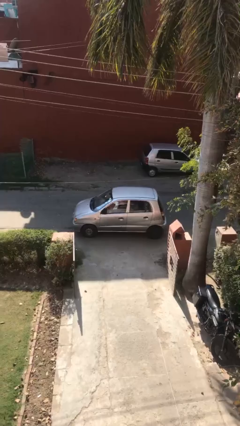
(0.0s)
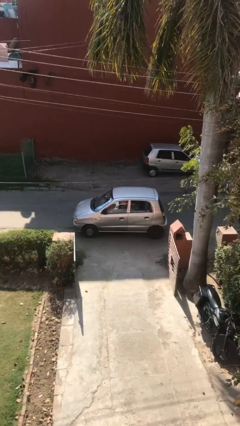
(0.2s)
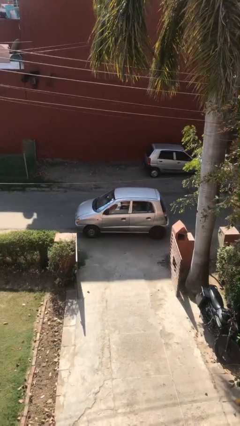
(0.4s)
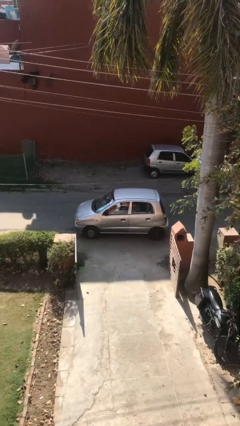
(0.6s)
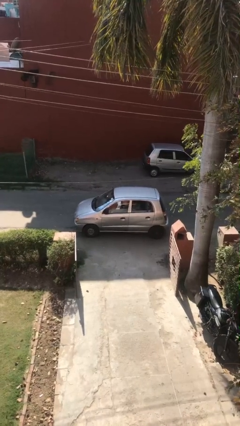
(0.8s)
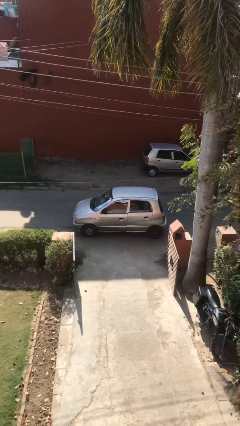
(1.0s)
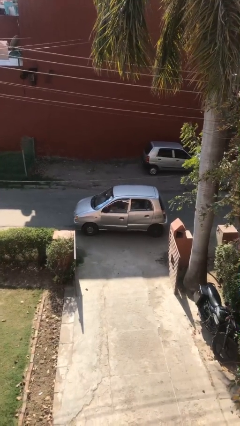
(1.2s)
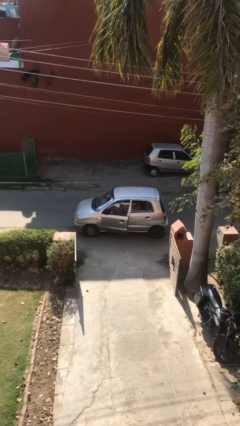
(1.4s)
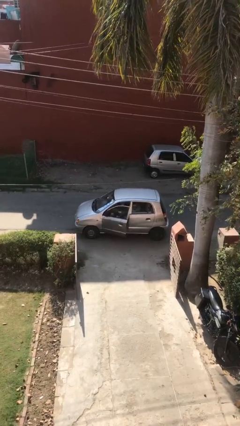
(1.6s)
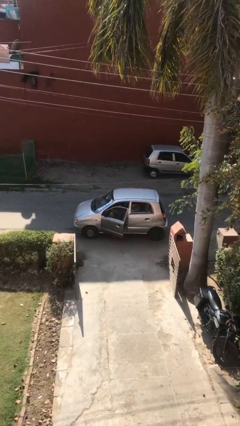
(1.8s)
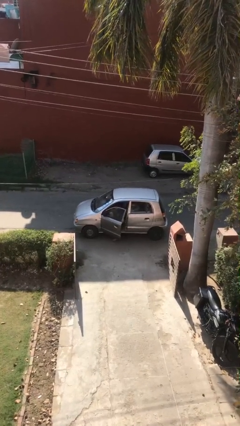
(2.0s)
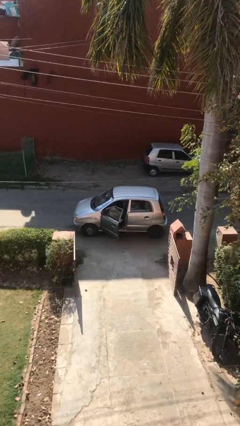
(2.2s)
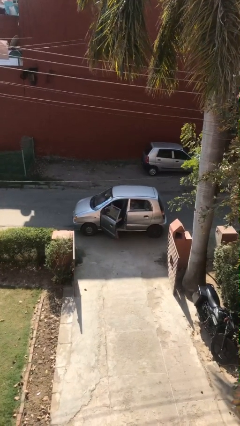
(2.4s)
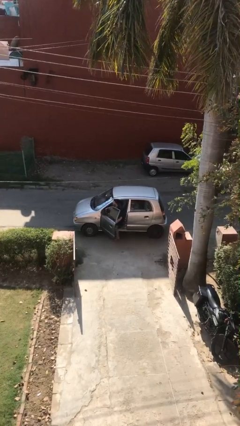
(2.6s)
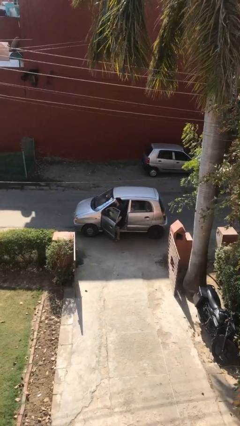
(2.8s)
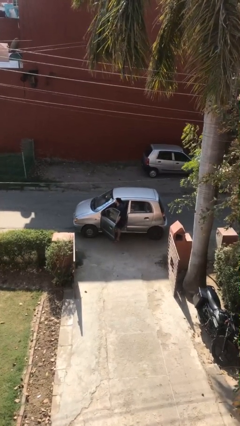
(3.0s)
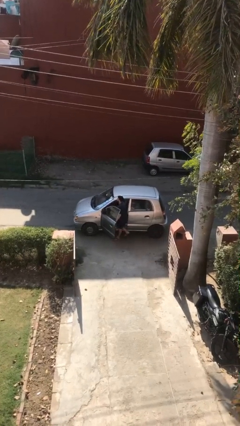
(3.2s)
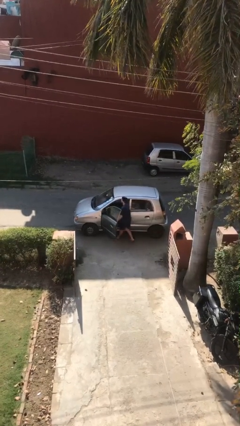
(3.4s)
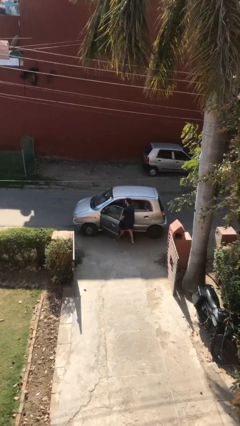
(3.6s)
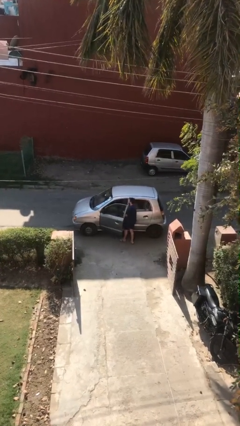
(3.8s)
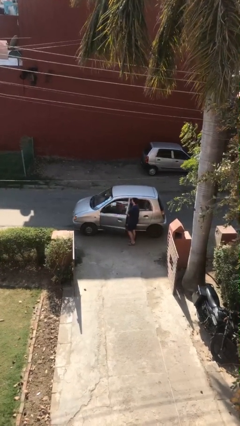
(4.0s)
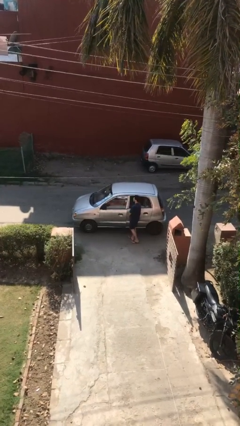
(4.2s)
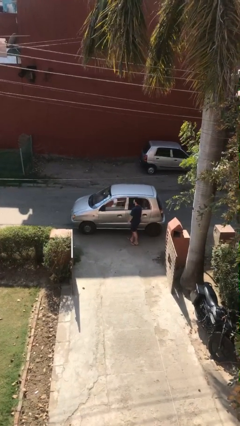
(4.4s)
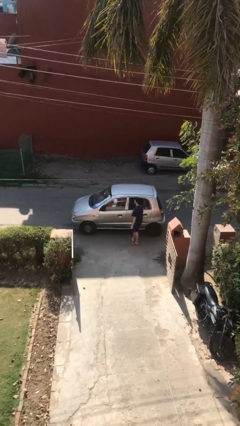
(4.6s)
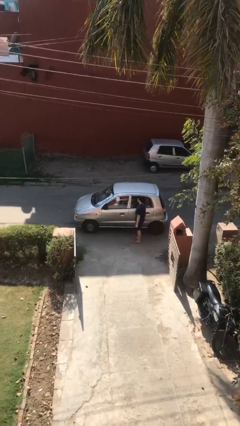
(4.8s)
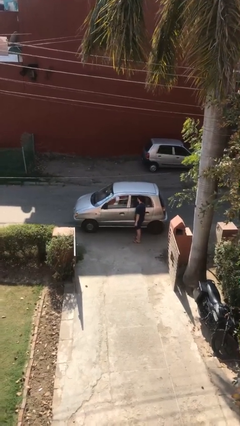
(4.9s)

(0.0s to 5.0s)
car drops off person

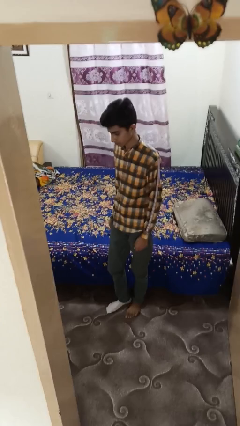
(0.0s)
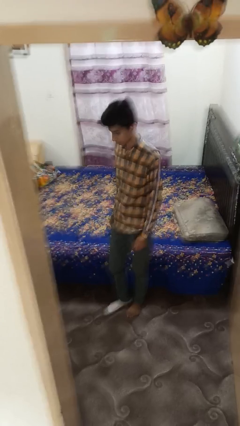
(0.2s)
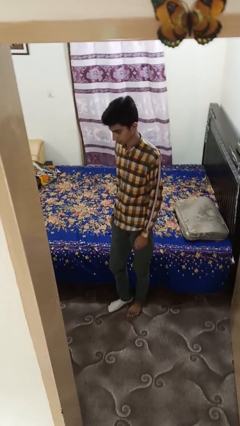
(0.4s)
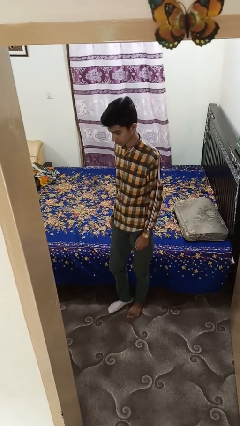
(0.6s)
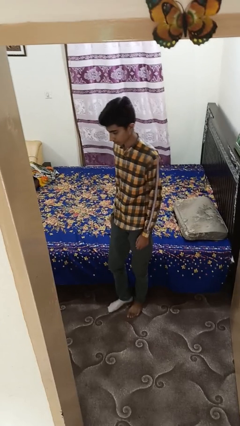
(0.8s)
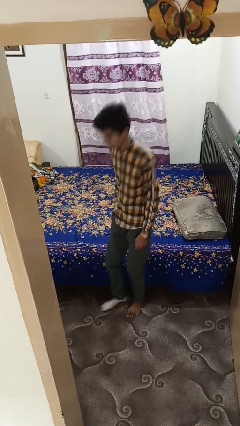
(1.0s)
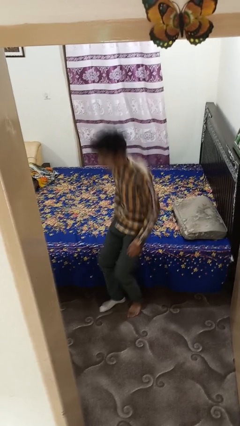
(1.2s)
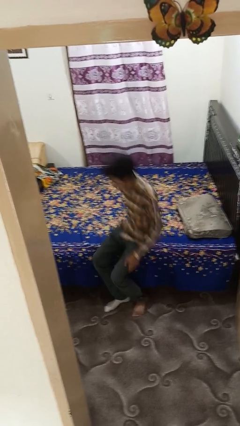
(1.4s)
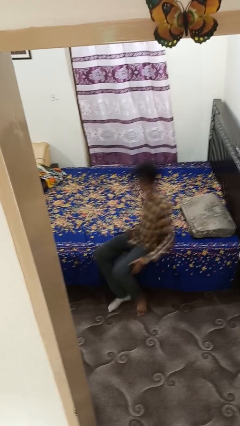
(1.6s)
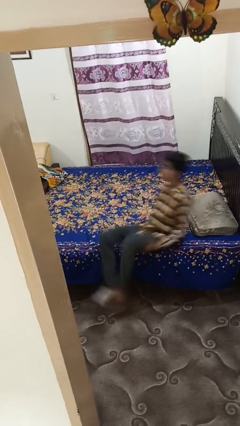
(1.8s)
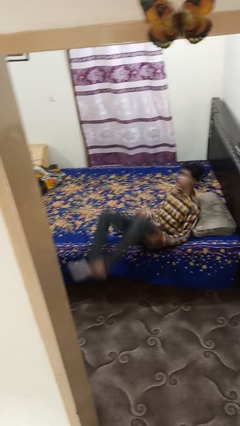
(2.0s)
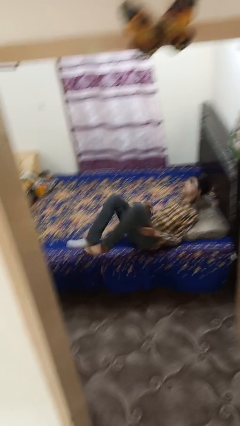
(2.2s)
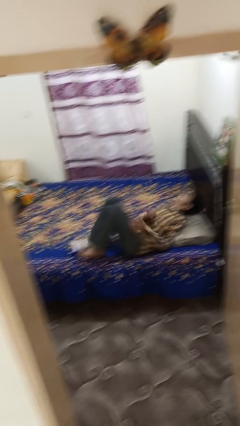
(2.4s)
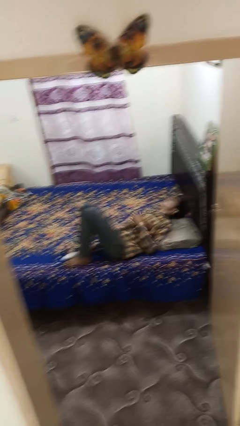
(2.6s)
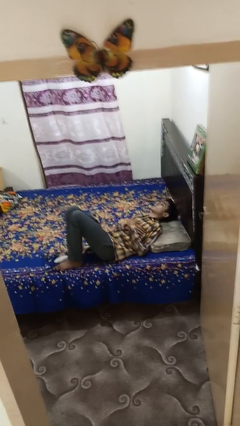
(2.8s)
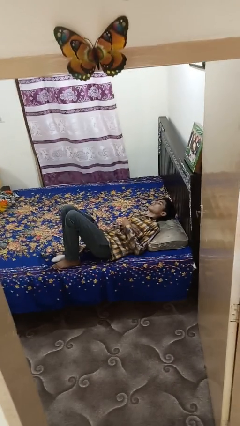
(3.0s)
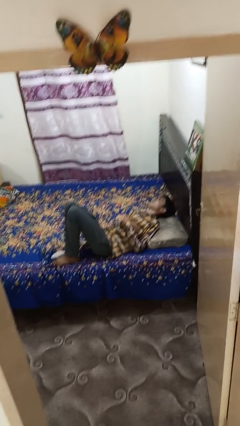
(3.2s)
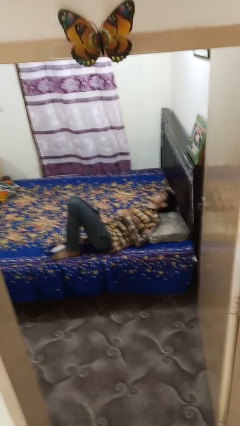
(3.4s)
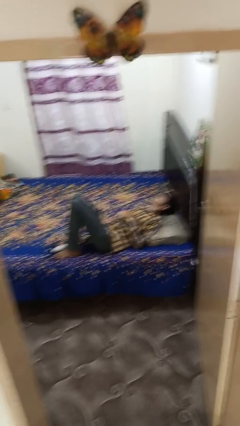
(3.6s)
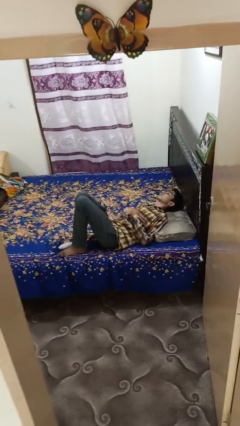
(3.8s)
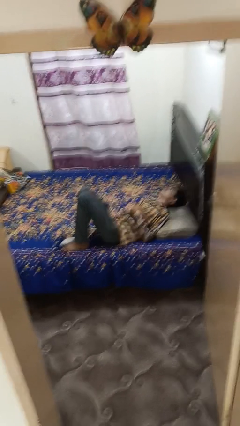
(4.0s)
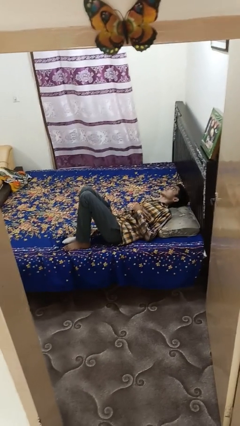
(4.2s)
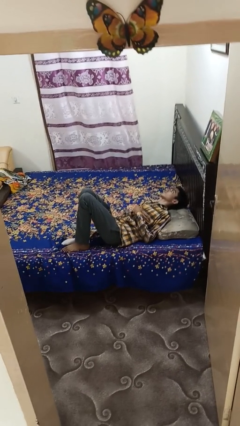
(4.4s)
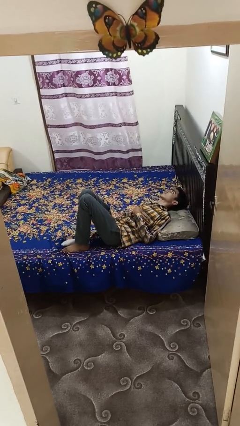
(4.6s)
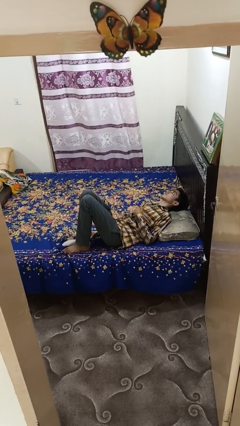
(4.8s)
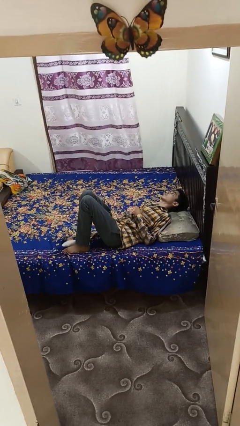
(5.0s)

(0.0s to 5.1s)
person lies down on bed

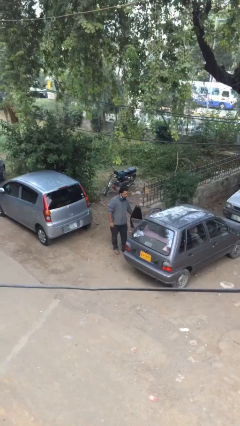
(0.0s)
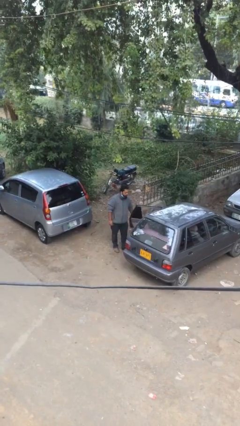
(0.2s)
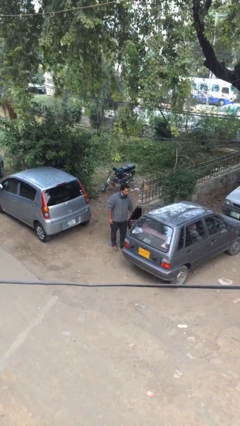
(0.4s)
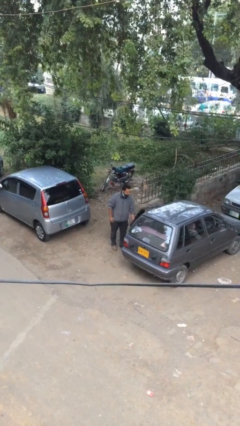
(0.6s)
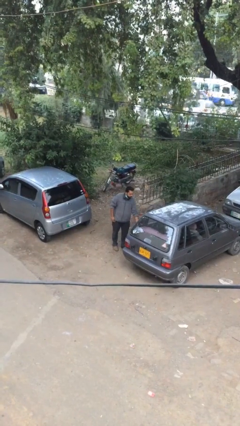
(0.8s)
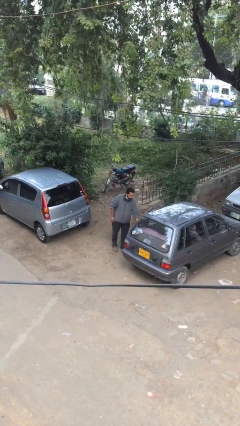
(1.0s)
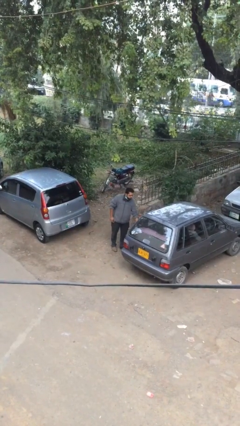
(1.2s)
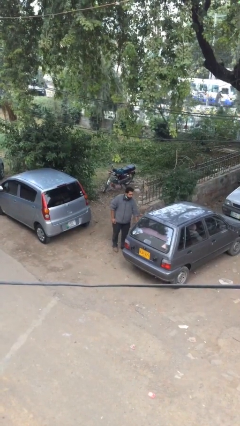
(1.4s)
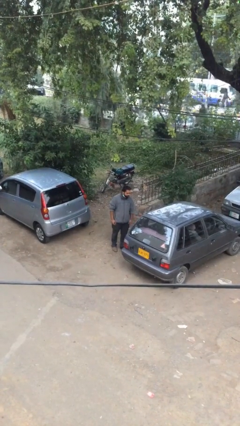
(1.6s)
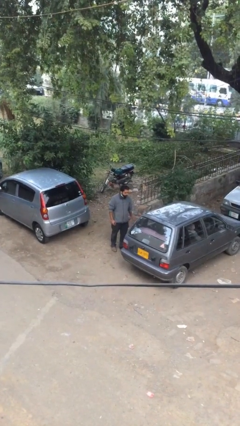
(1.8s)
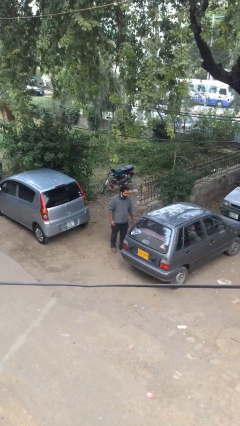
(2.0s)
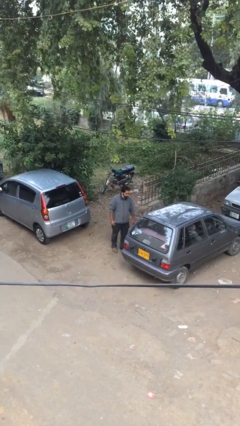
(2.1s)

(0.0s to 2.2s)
person closes car door

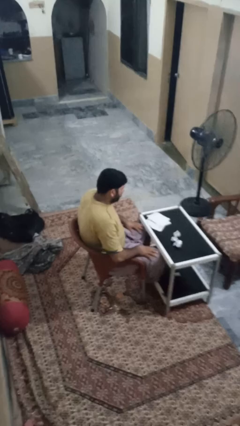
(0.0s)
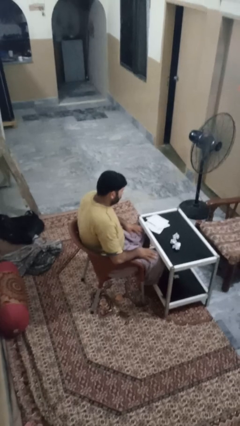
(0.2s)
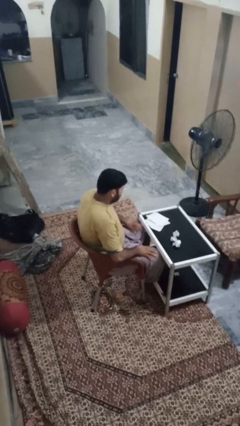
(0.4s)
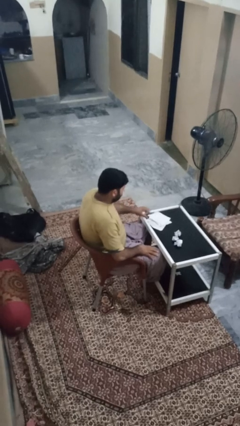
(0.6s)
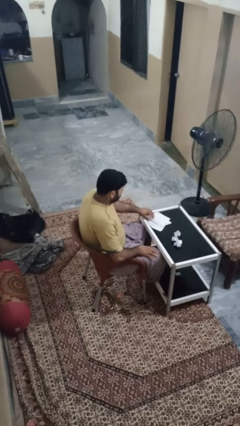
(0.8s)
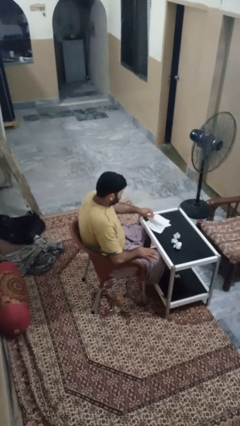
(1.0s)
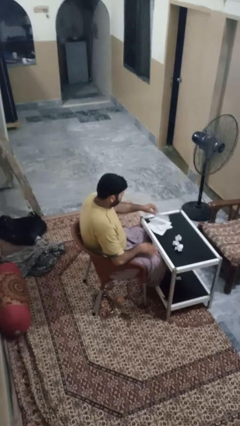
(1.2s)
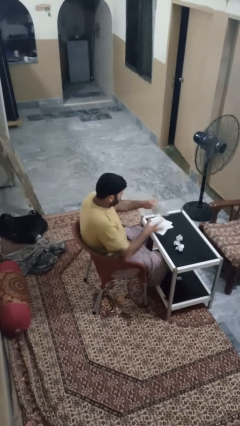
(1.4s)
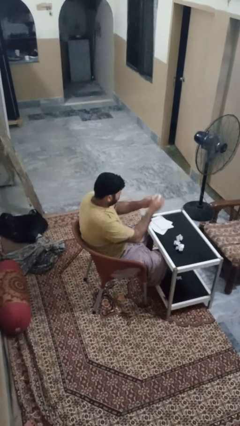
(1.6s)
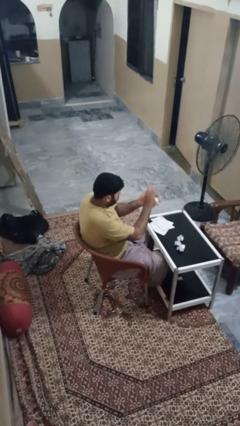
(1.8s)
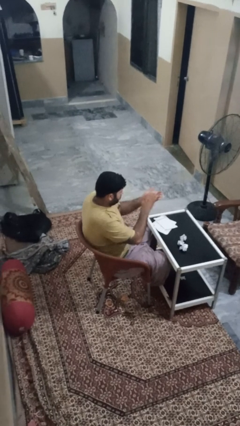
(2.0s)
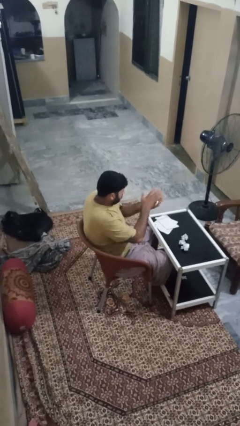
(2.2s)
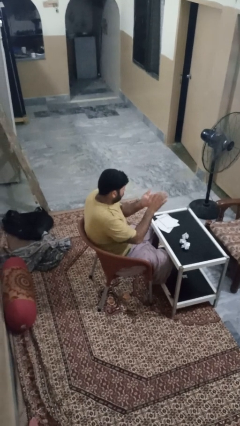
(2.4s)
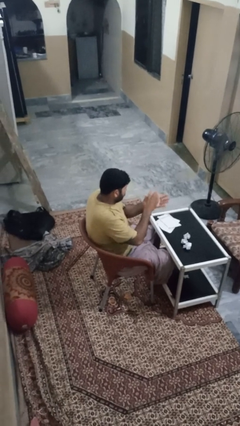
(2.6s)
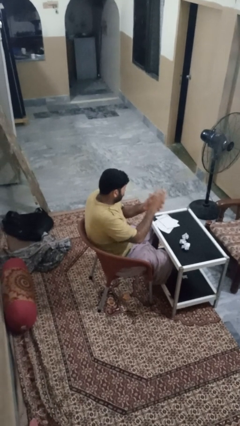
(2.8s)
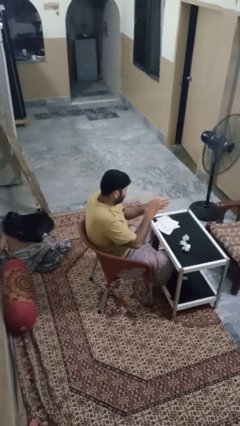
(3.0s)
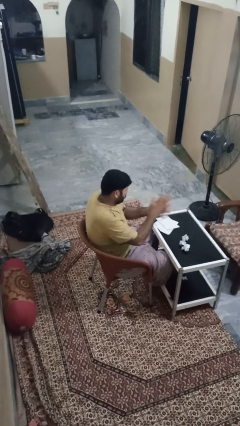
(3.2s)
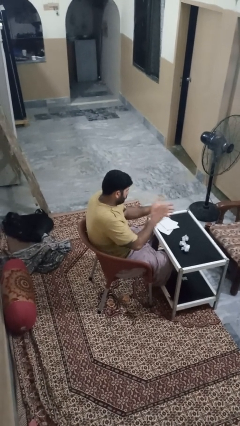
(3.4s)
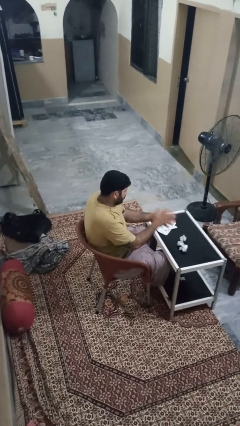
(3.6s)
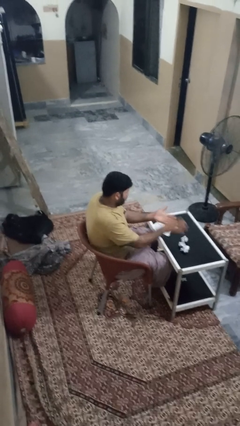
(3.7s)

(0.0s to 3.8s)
person crumples paper

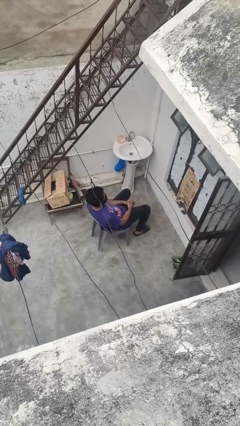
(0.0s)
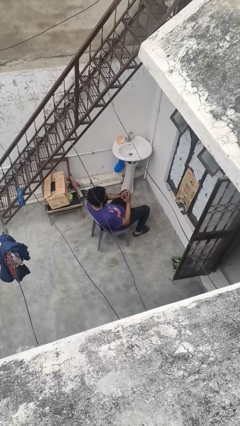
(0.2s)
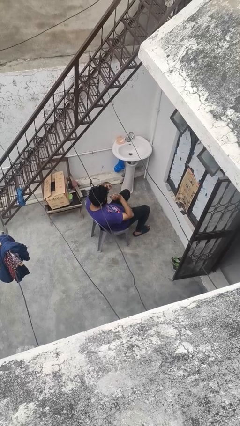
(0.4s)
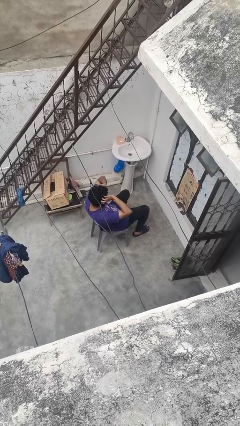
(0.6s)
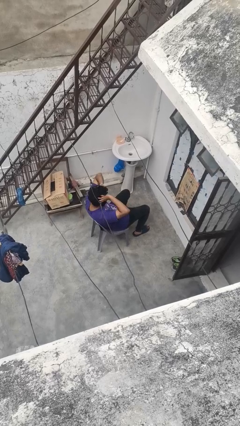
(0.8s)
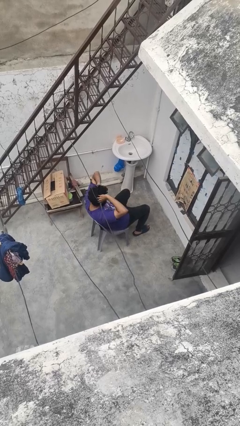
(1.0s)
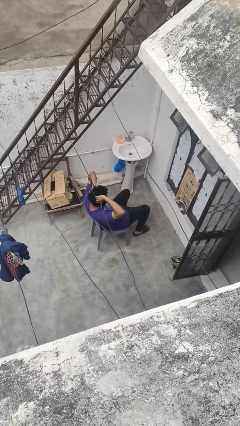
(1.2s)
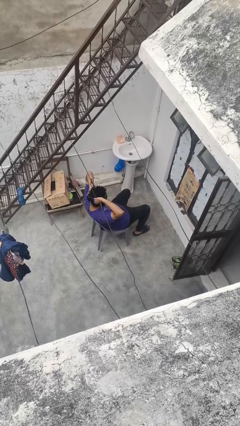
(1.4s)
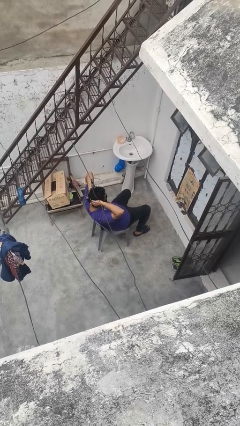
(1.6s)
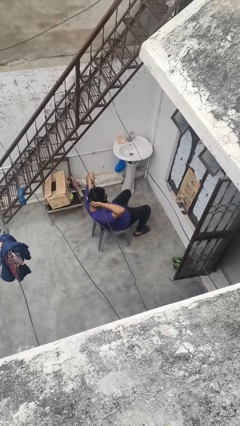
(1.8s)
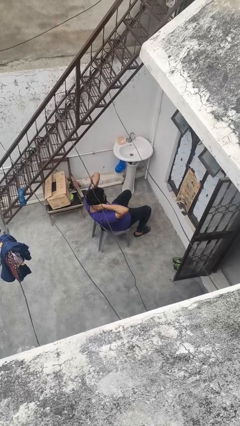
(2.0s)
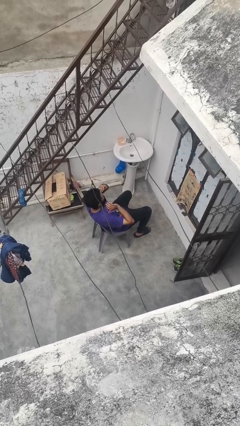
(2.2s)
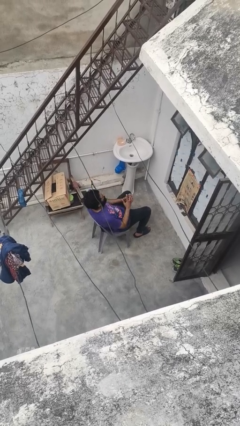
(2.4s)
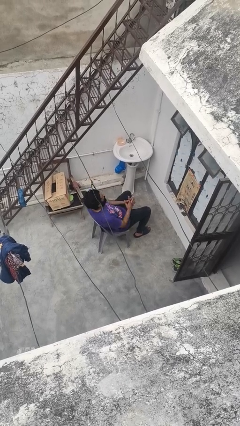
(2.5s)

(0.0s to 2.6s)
person strokes hair
